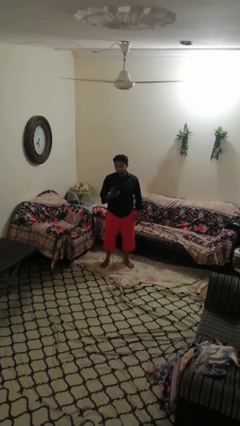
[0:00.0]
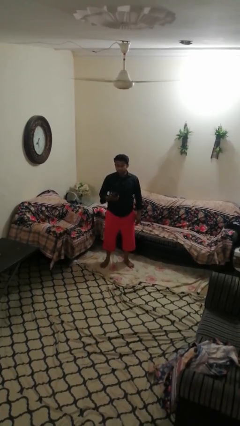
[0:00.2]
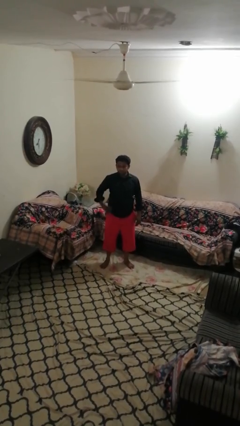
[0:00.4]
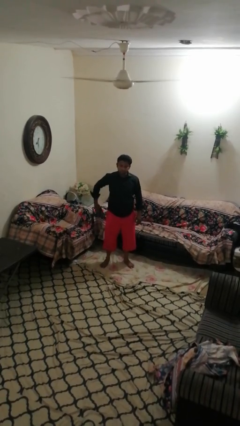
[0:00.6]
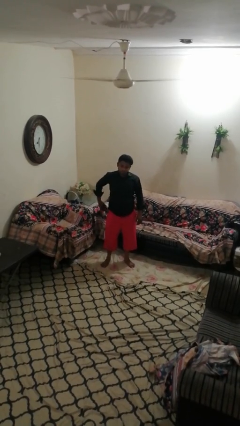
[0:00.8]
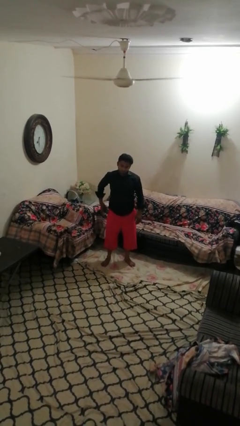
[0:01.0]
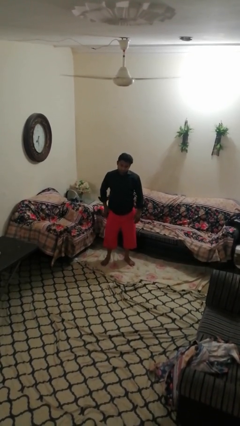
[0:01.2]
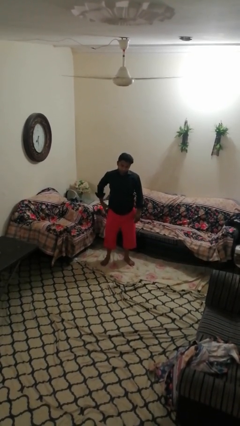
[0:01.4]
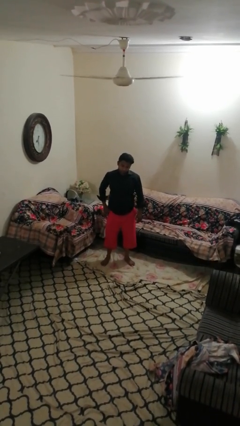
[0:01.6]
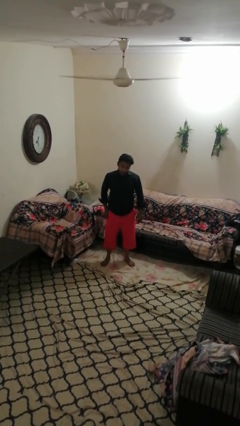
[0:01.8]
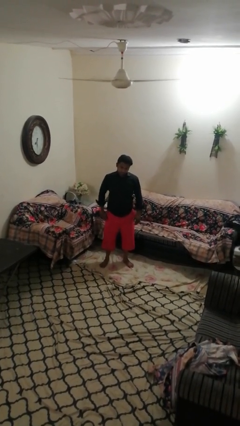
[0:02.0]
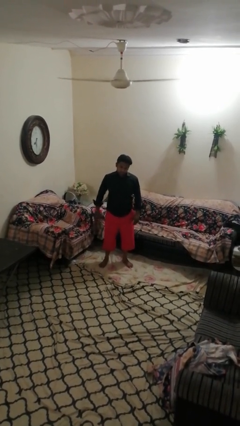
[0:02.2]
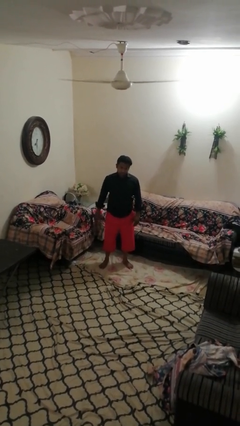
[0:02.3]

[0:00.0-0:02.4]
person puts phone into pocket

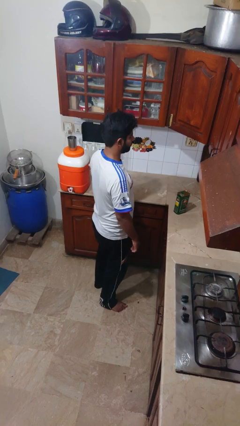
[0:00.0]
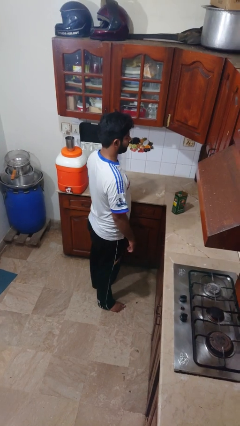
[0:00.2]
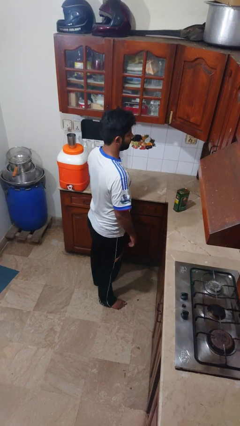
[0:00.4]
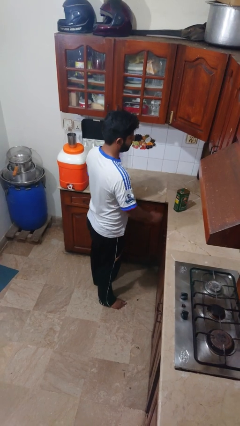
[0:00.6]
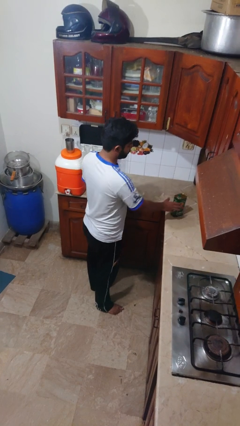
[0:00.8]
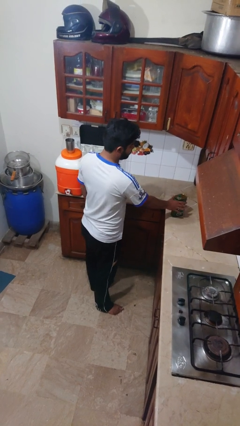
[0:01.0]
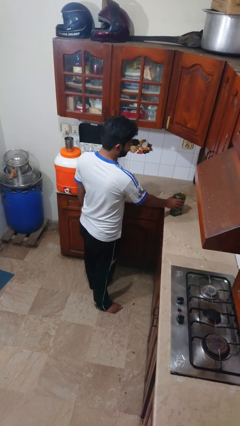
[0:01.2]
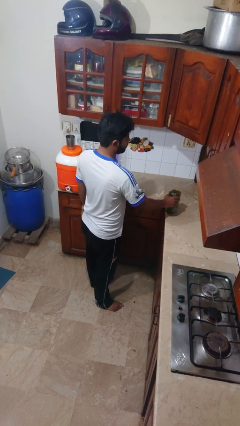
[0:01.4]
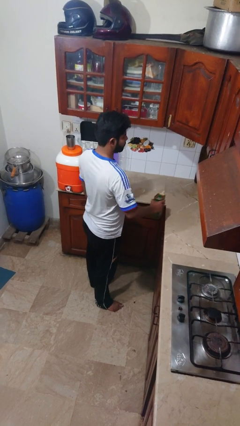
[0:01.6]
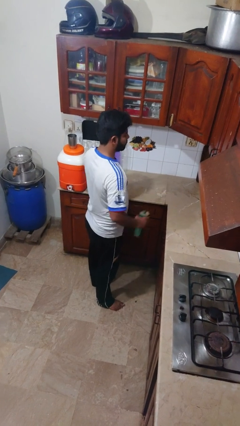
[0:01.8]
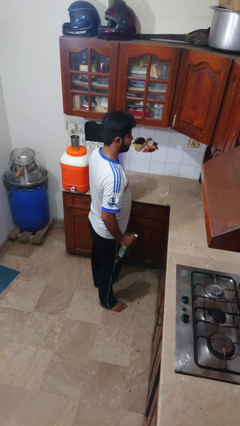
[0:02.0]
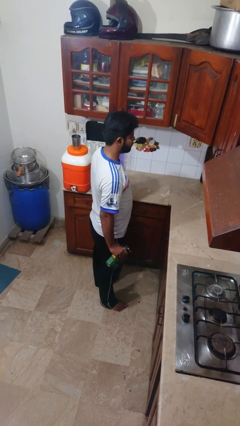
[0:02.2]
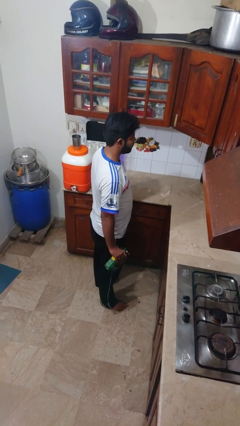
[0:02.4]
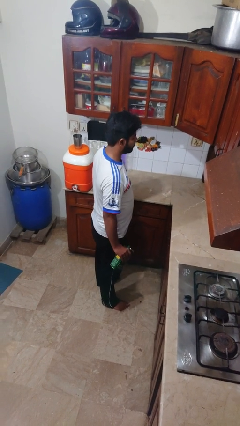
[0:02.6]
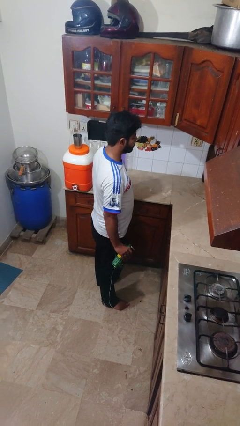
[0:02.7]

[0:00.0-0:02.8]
person picks up object from countertop

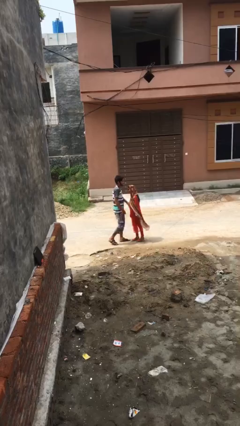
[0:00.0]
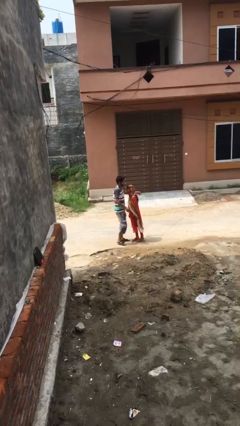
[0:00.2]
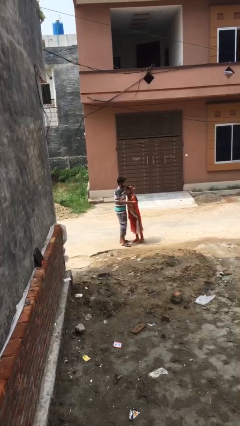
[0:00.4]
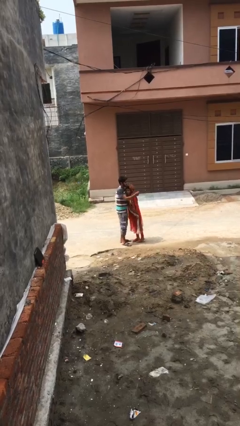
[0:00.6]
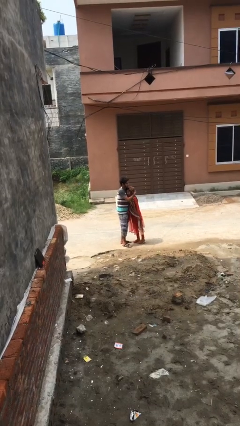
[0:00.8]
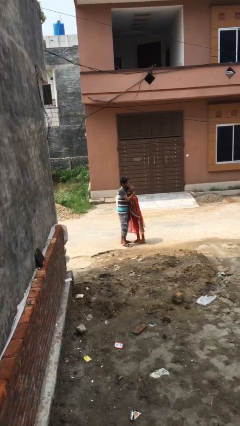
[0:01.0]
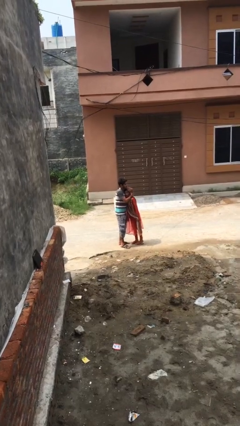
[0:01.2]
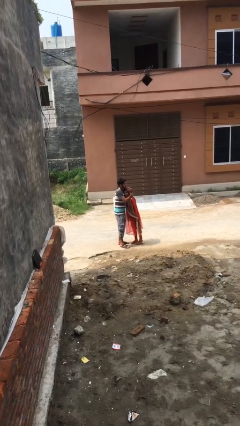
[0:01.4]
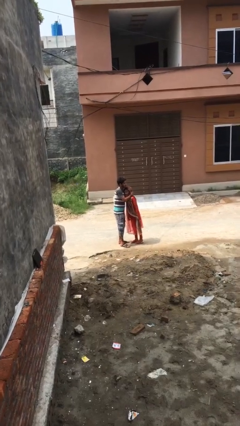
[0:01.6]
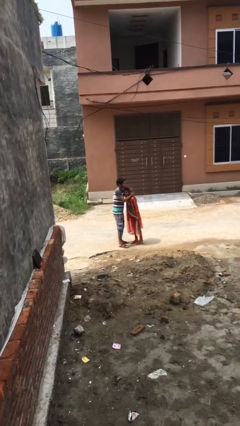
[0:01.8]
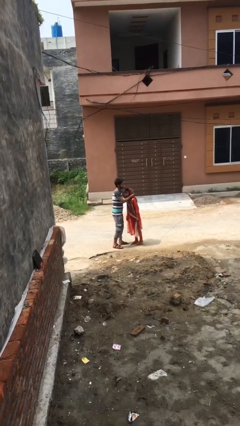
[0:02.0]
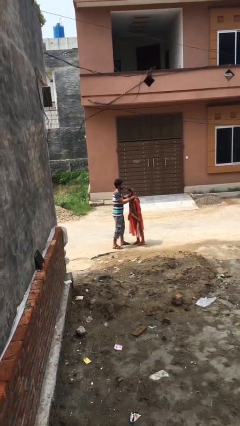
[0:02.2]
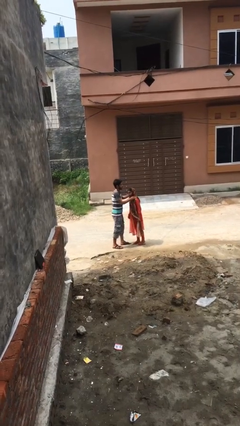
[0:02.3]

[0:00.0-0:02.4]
person embraces person

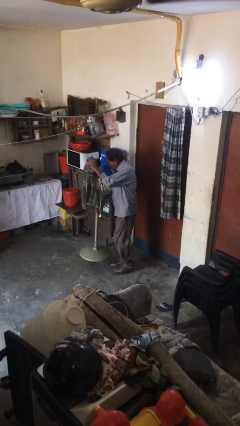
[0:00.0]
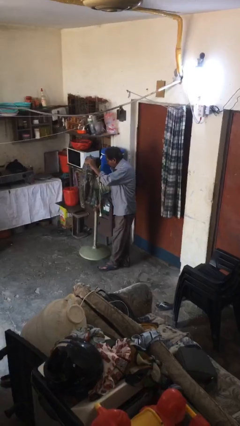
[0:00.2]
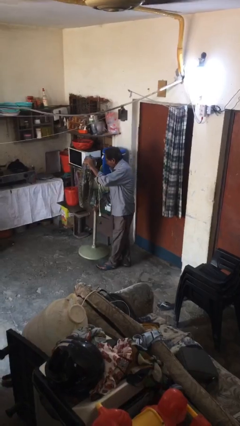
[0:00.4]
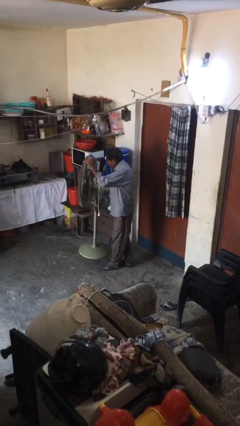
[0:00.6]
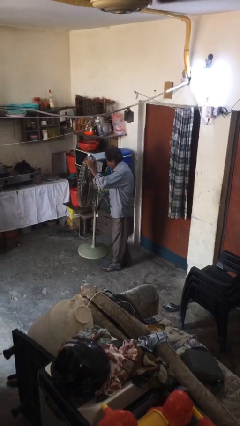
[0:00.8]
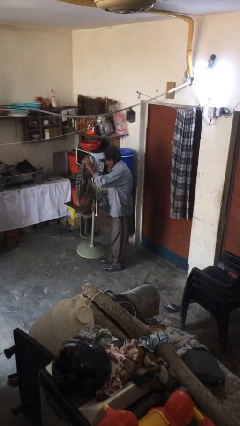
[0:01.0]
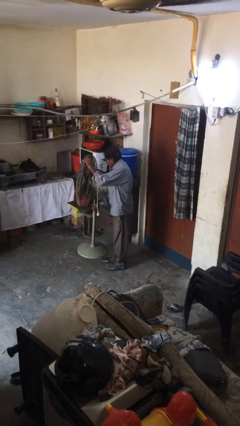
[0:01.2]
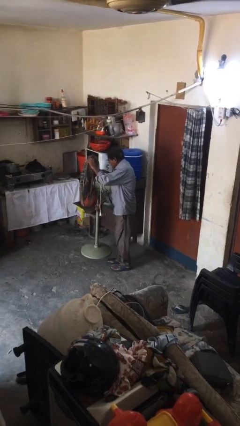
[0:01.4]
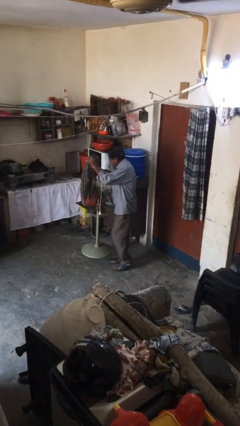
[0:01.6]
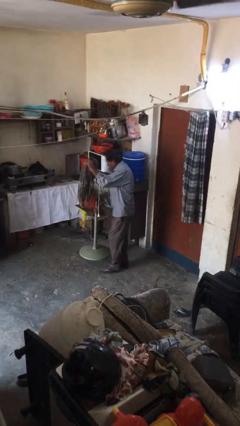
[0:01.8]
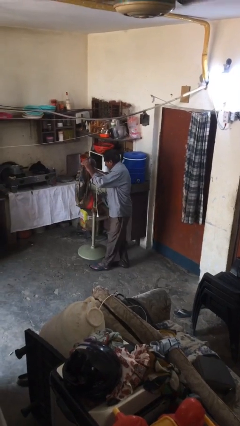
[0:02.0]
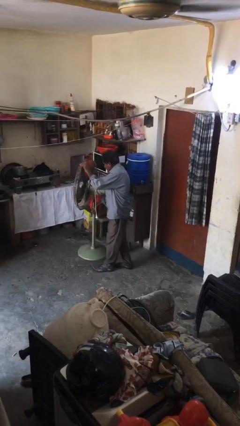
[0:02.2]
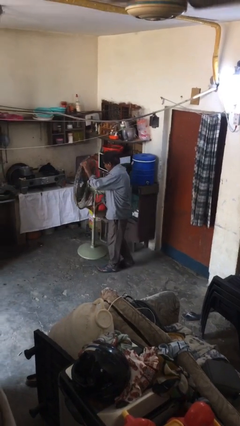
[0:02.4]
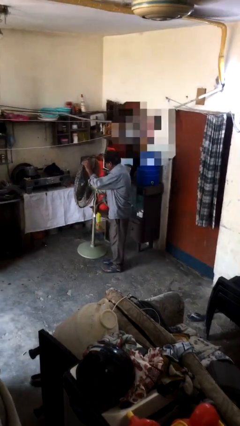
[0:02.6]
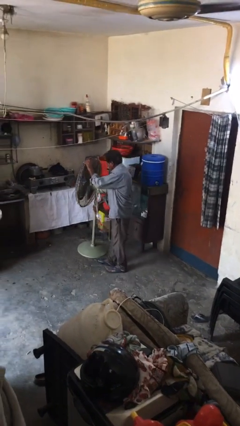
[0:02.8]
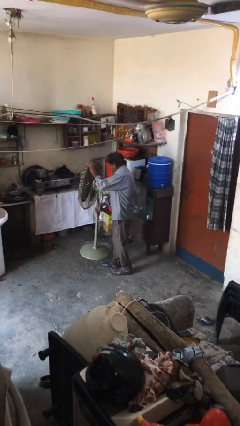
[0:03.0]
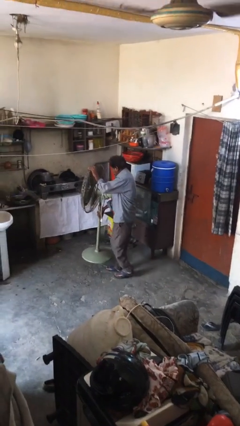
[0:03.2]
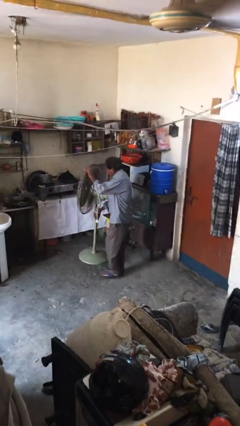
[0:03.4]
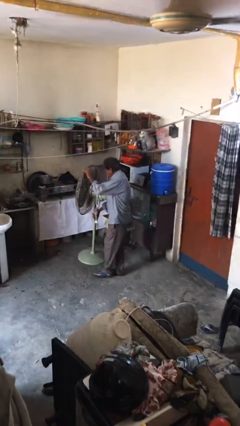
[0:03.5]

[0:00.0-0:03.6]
person carries heavy object

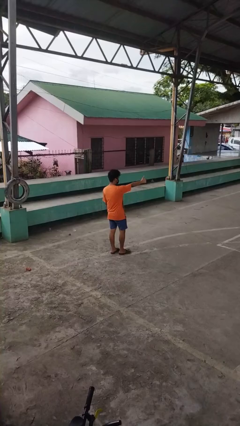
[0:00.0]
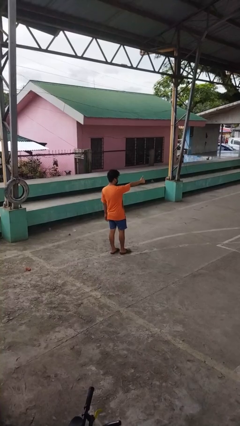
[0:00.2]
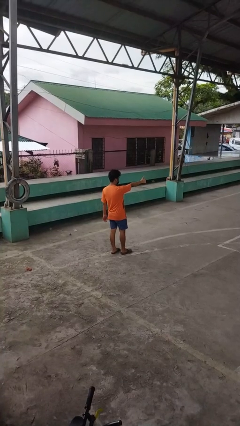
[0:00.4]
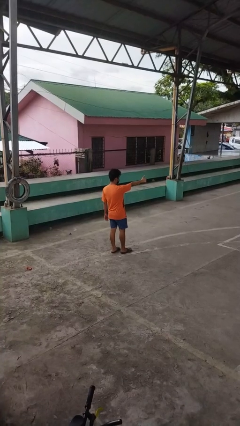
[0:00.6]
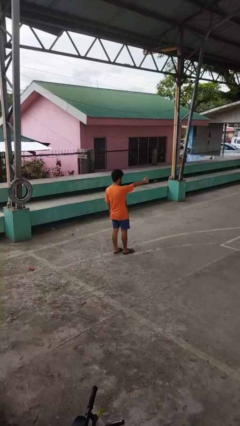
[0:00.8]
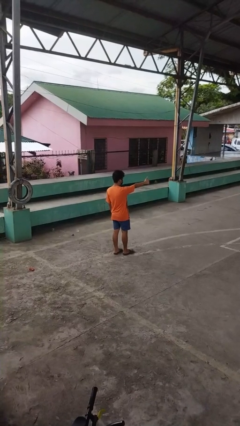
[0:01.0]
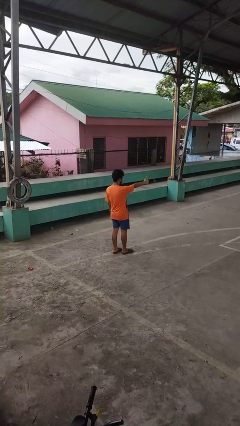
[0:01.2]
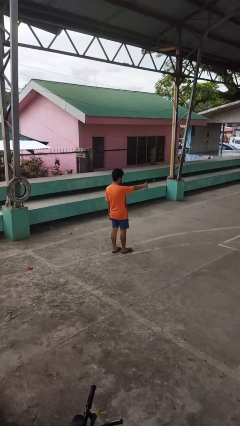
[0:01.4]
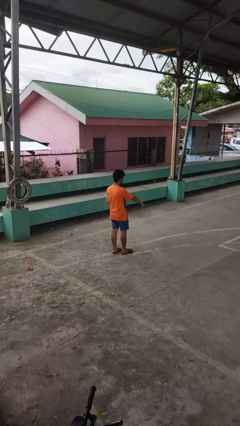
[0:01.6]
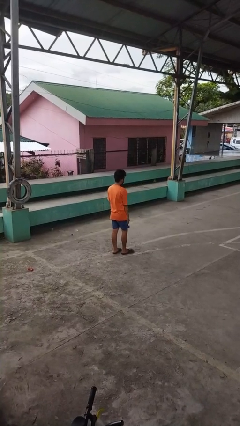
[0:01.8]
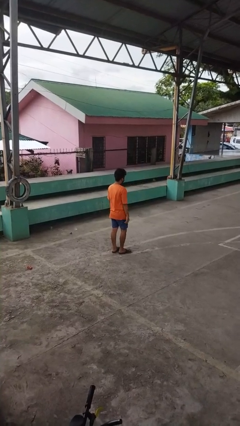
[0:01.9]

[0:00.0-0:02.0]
person gestures thumbs up

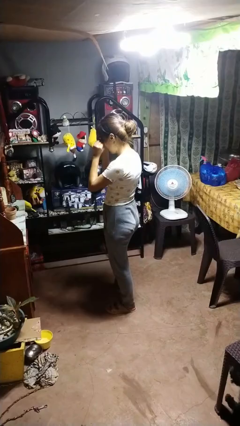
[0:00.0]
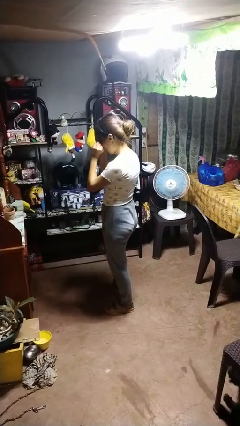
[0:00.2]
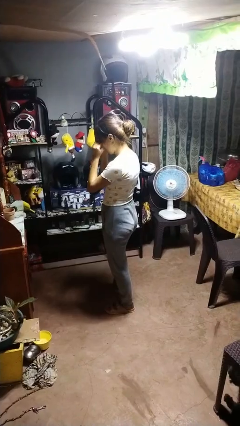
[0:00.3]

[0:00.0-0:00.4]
person rubs eyes

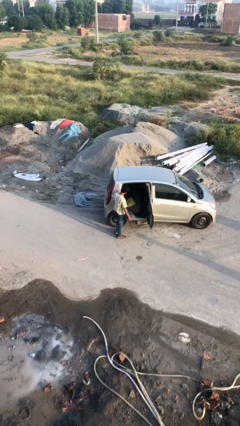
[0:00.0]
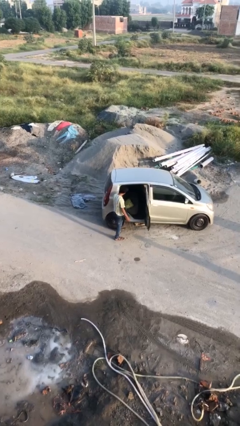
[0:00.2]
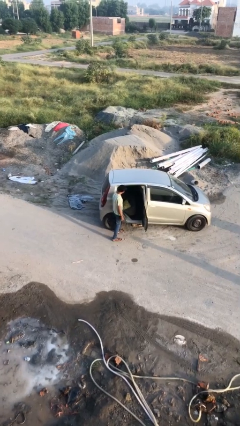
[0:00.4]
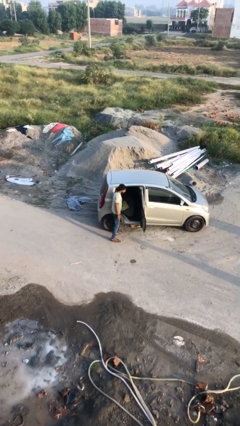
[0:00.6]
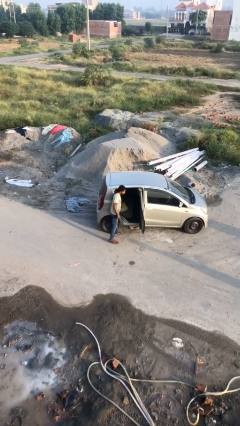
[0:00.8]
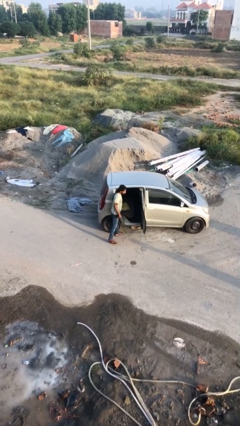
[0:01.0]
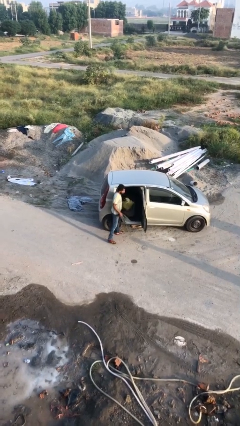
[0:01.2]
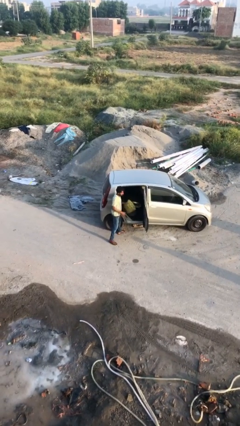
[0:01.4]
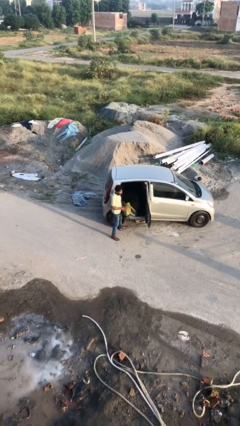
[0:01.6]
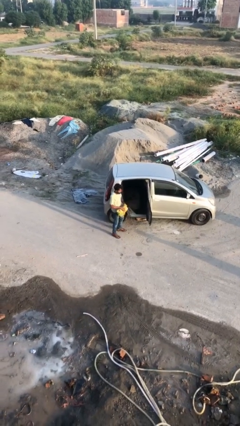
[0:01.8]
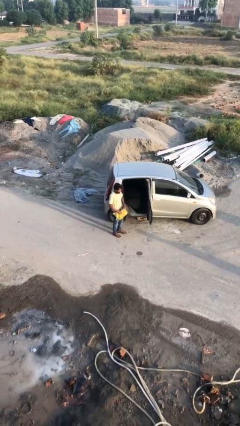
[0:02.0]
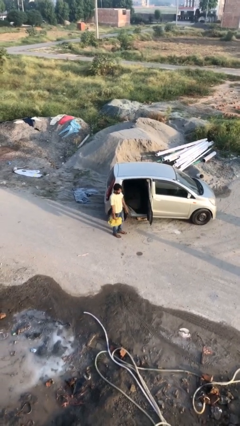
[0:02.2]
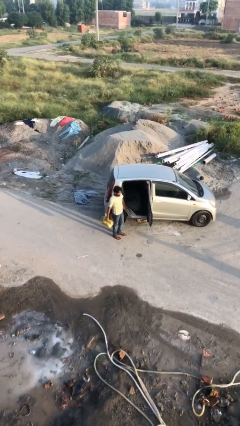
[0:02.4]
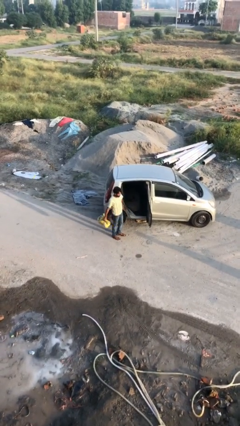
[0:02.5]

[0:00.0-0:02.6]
person unloads car

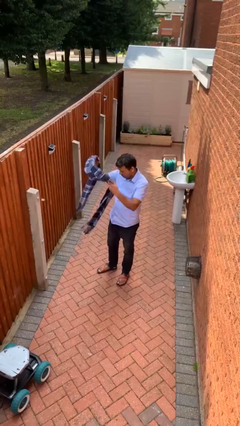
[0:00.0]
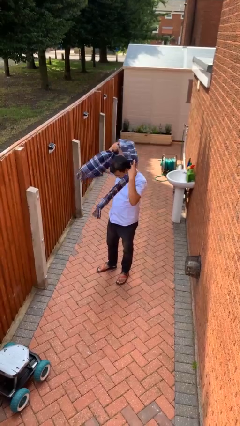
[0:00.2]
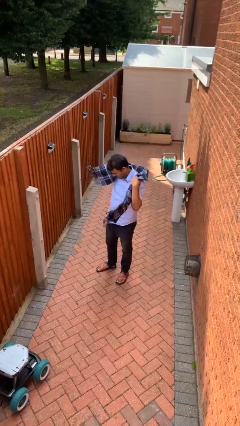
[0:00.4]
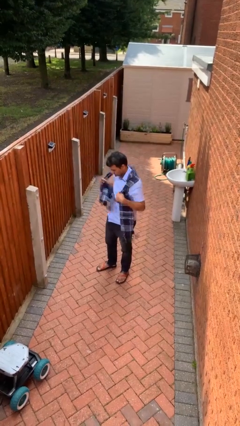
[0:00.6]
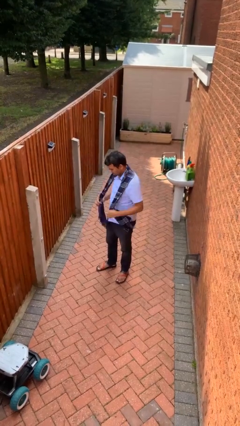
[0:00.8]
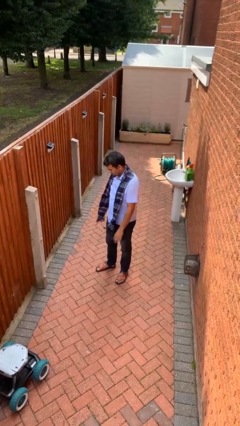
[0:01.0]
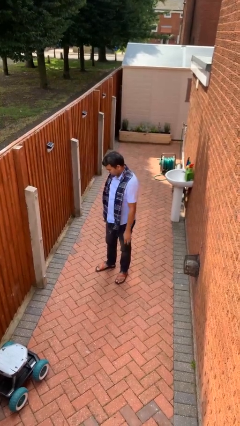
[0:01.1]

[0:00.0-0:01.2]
person puts on scarf
